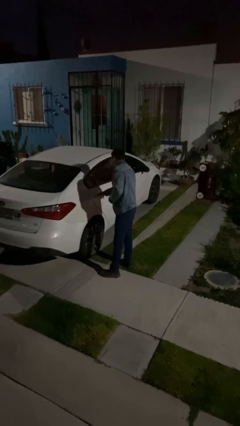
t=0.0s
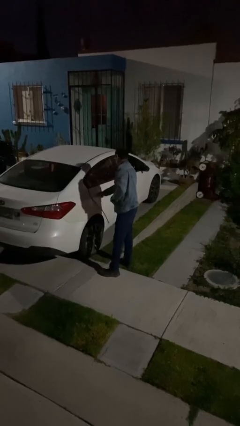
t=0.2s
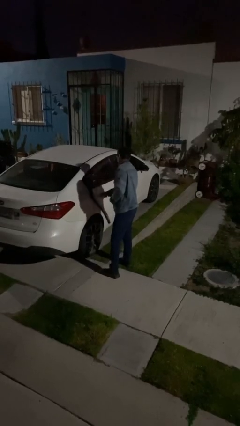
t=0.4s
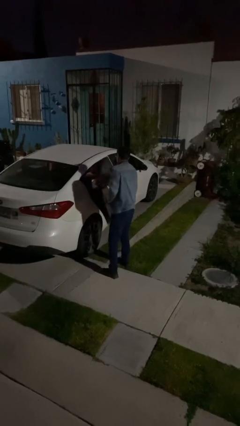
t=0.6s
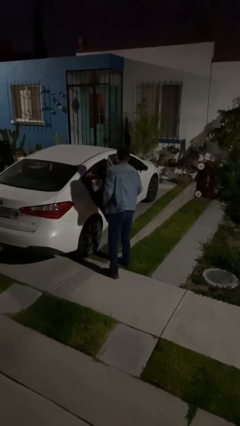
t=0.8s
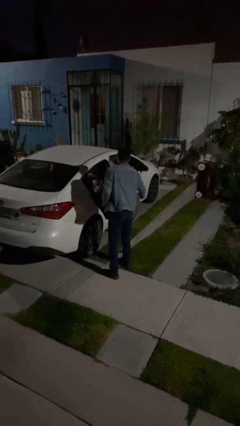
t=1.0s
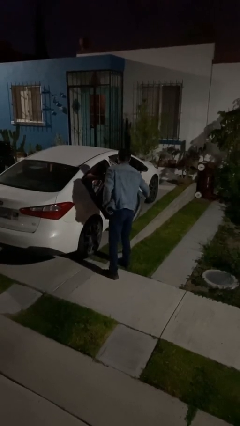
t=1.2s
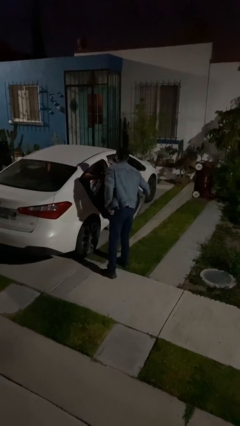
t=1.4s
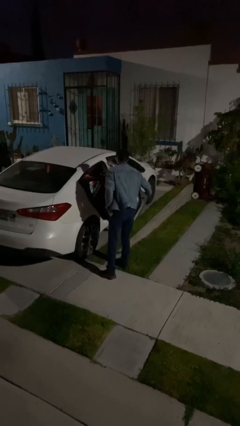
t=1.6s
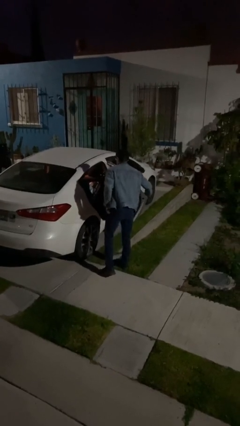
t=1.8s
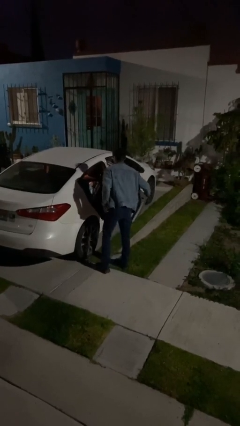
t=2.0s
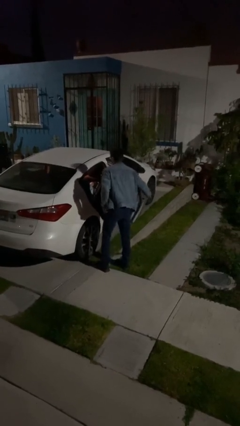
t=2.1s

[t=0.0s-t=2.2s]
person opens car door

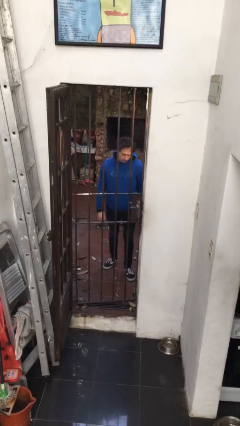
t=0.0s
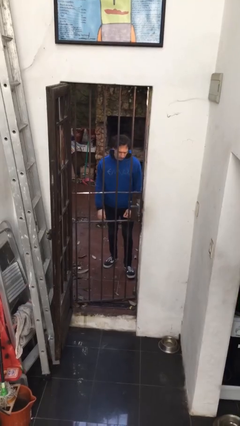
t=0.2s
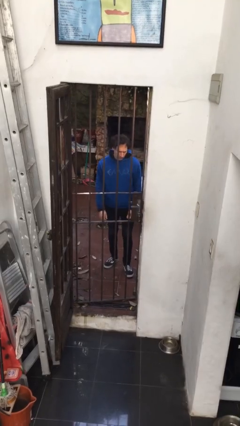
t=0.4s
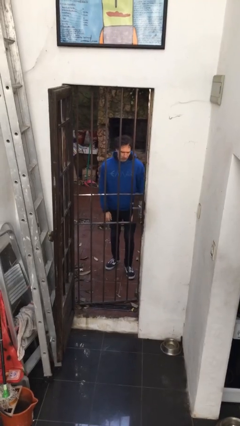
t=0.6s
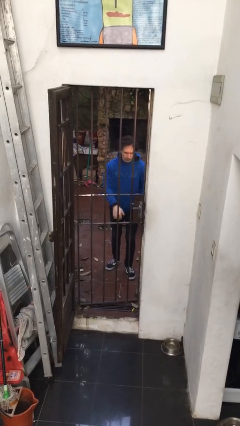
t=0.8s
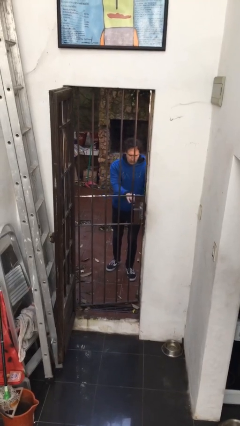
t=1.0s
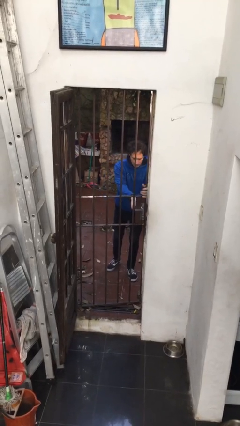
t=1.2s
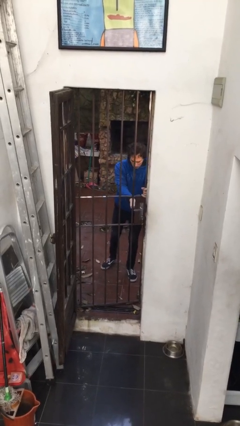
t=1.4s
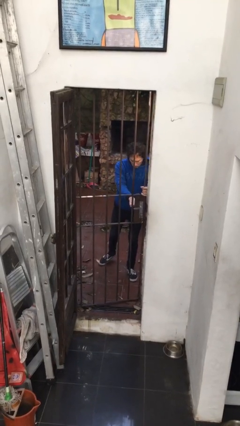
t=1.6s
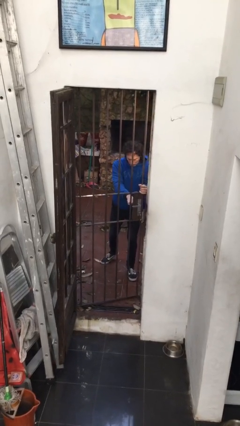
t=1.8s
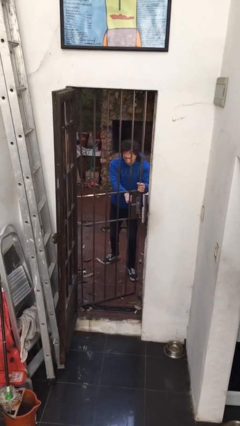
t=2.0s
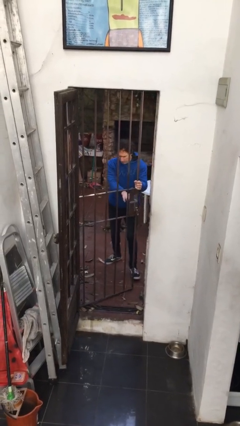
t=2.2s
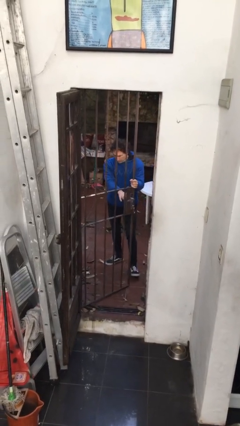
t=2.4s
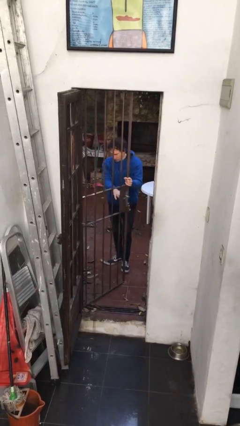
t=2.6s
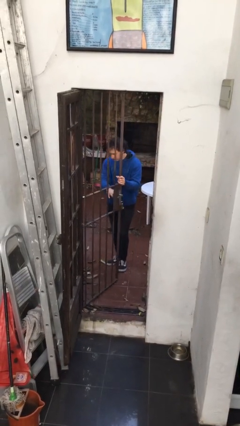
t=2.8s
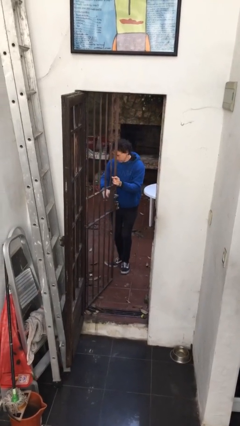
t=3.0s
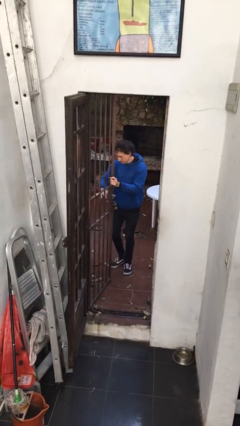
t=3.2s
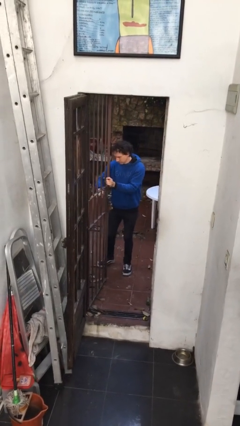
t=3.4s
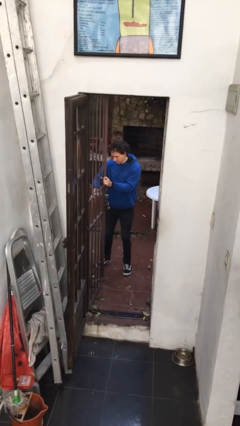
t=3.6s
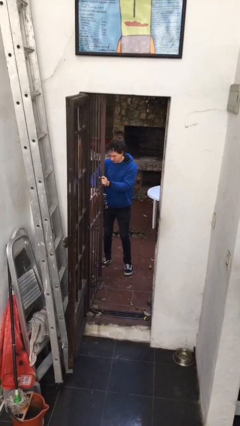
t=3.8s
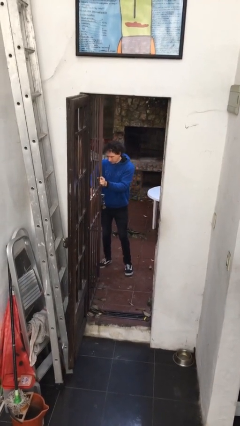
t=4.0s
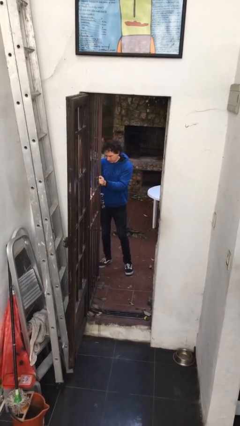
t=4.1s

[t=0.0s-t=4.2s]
person opens gate

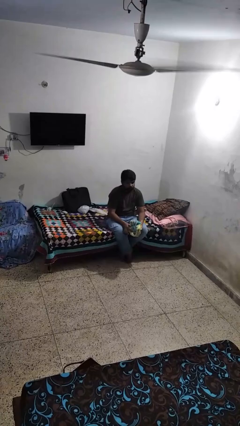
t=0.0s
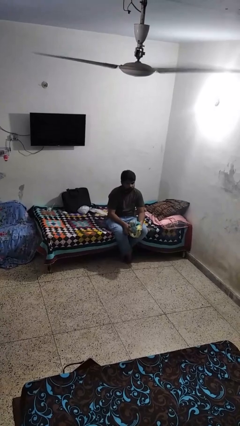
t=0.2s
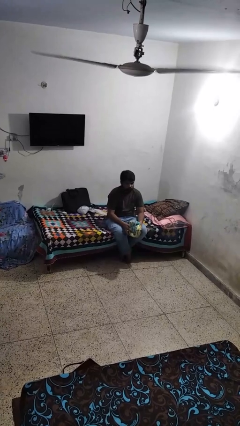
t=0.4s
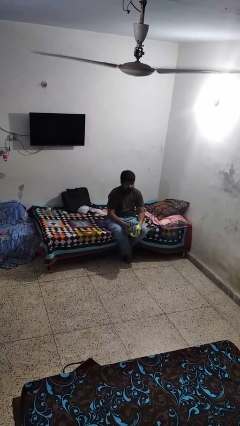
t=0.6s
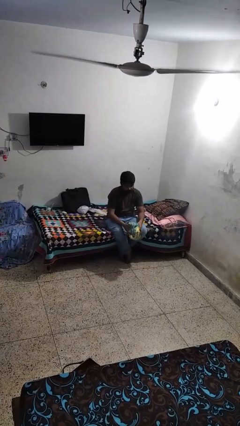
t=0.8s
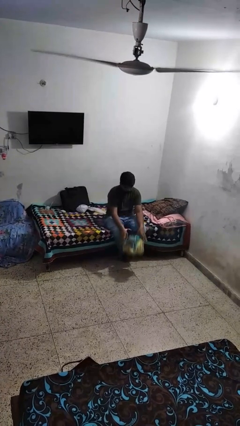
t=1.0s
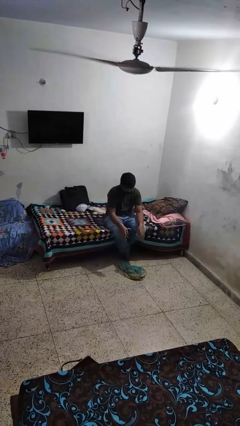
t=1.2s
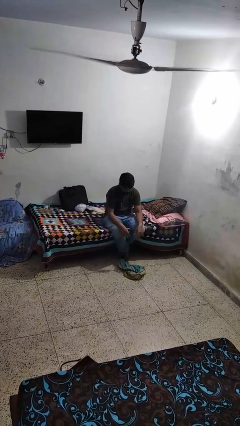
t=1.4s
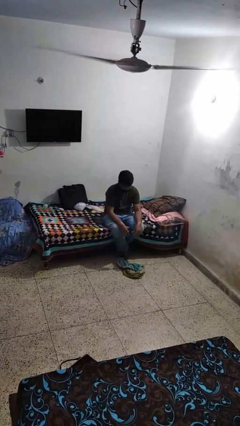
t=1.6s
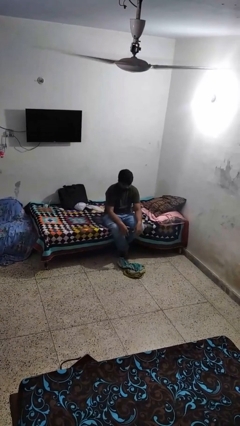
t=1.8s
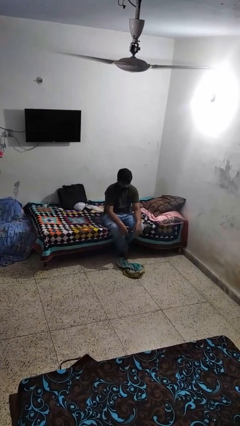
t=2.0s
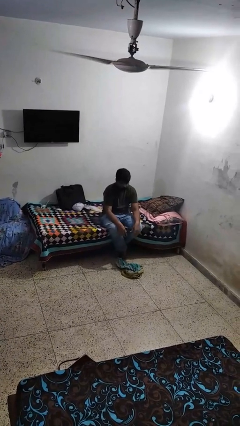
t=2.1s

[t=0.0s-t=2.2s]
person drops object

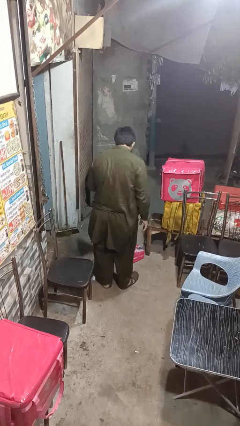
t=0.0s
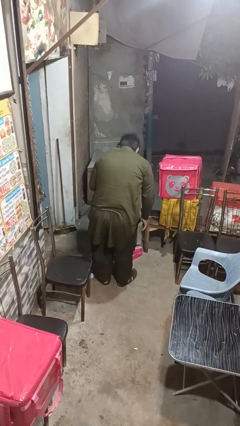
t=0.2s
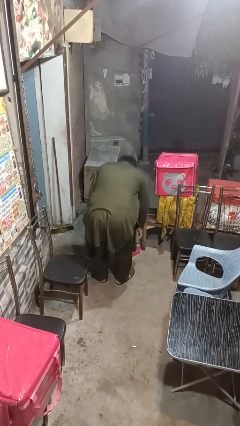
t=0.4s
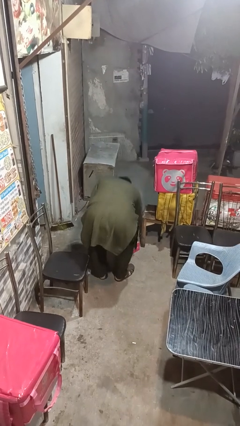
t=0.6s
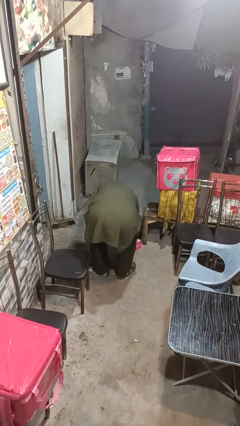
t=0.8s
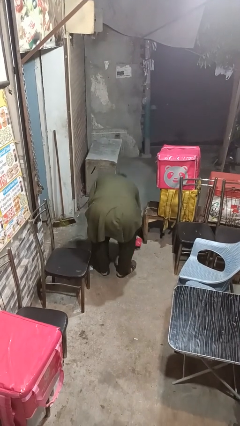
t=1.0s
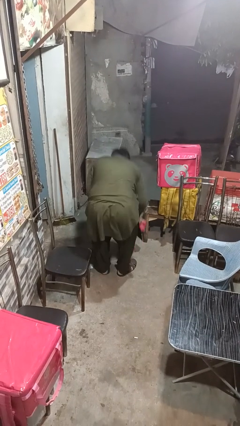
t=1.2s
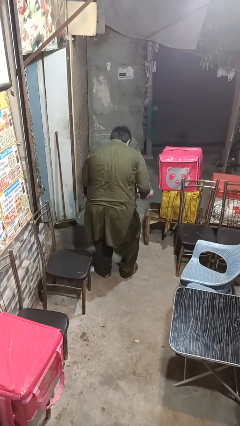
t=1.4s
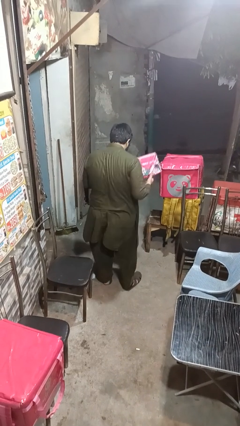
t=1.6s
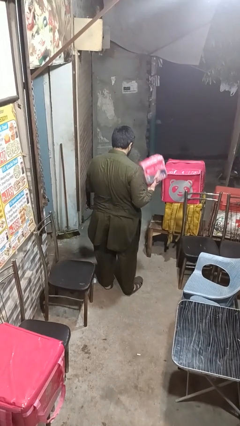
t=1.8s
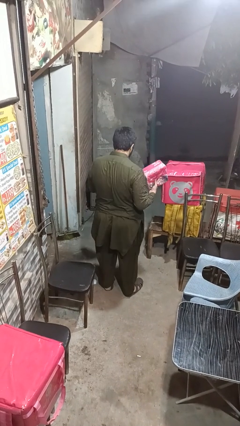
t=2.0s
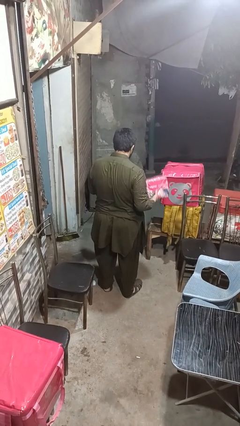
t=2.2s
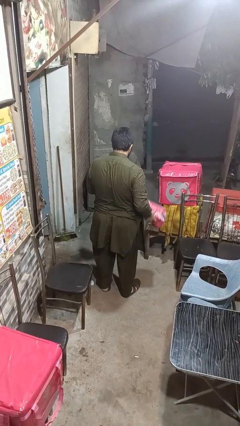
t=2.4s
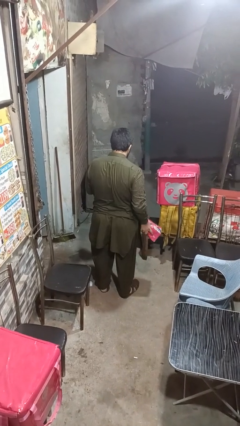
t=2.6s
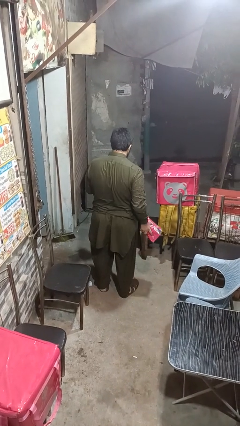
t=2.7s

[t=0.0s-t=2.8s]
person picks up object from floor

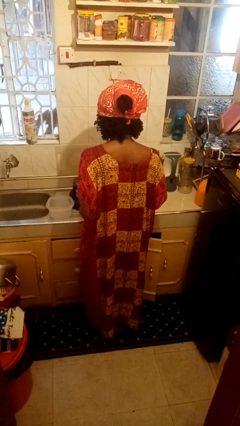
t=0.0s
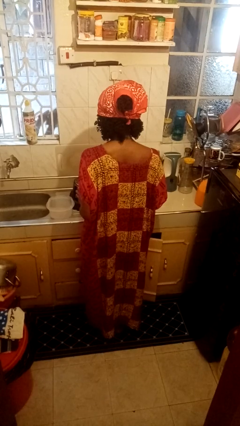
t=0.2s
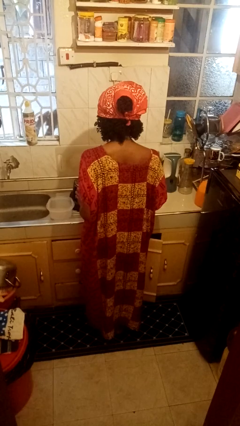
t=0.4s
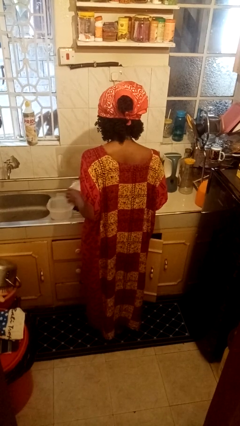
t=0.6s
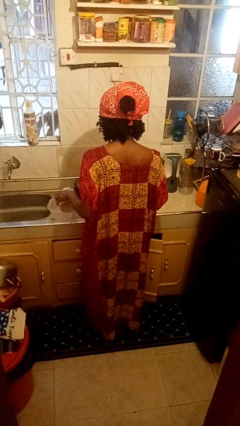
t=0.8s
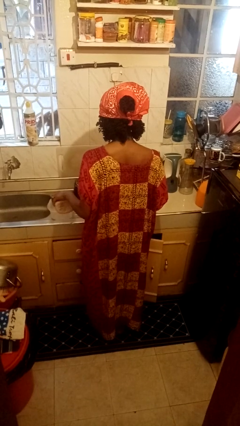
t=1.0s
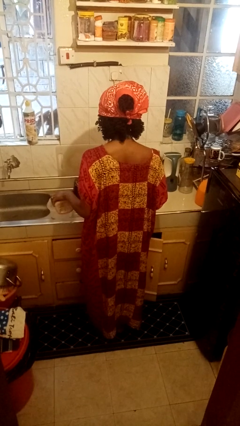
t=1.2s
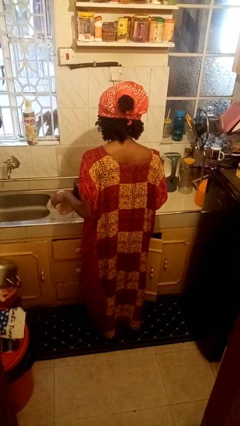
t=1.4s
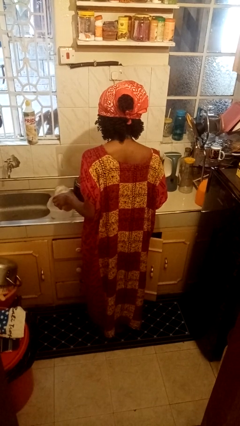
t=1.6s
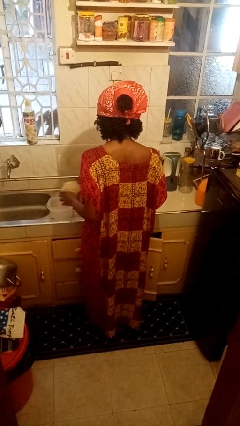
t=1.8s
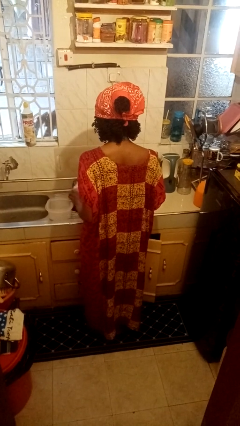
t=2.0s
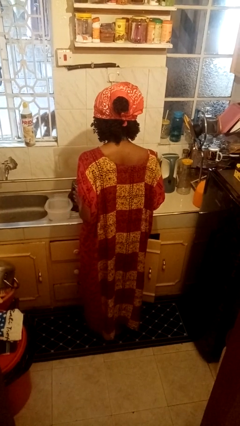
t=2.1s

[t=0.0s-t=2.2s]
person pours into bowl

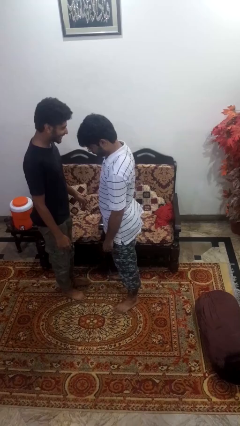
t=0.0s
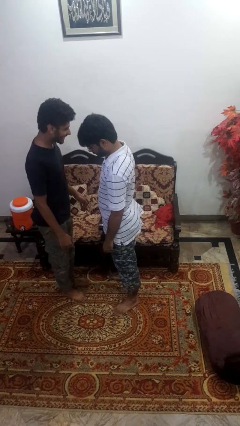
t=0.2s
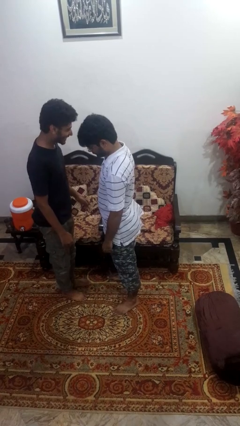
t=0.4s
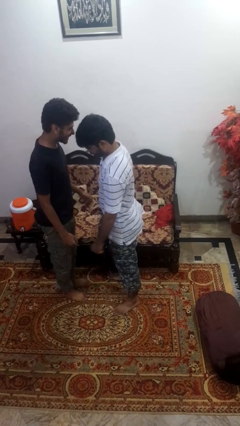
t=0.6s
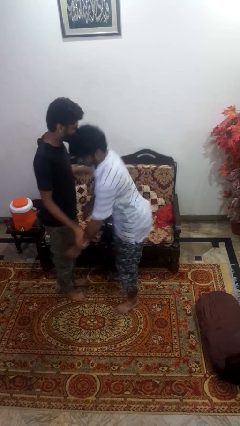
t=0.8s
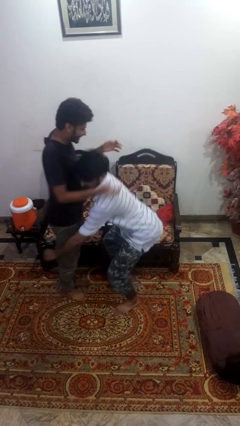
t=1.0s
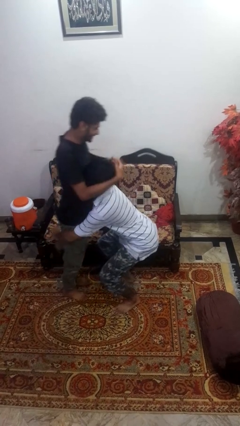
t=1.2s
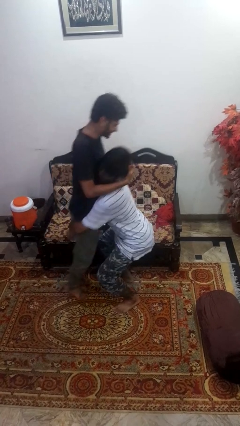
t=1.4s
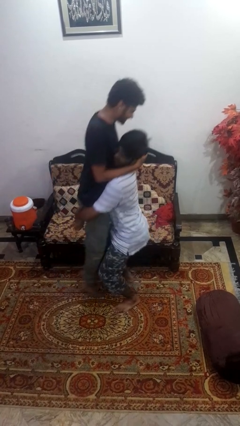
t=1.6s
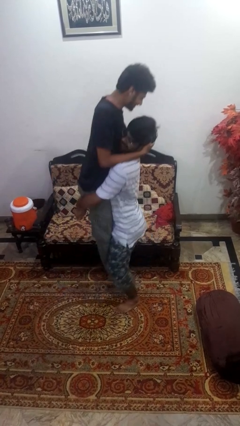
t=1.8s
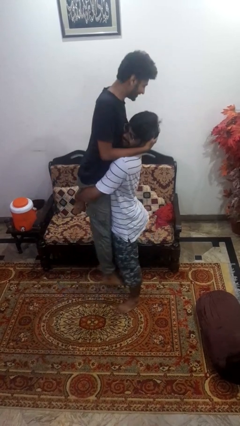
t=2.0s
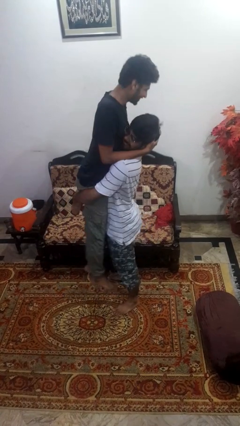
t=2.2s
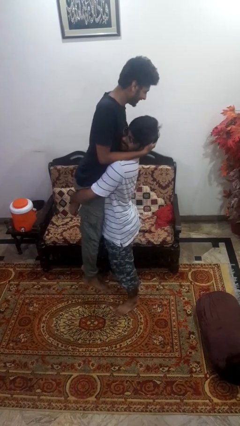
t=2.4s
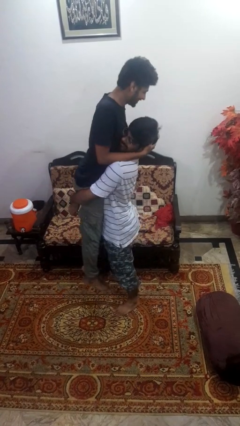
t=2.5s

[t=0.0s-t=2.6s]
person picks up person

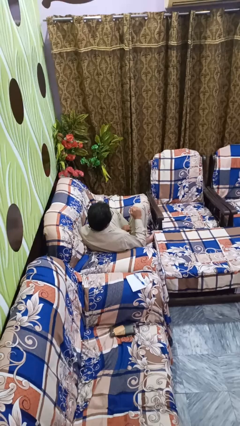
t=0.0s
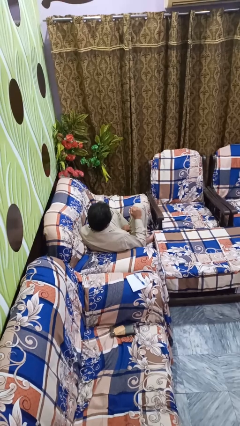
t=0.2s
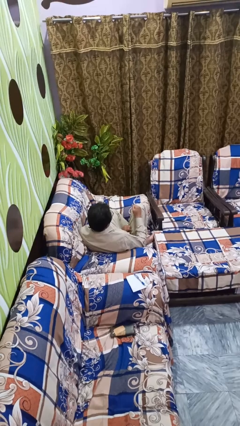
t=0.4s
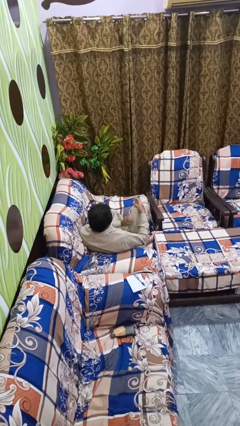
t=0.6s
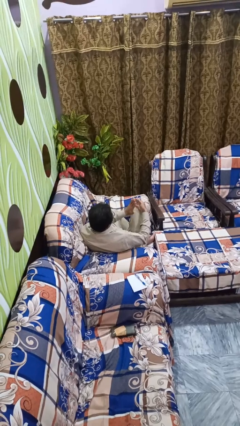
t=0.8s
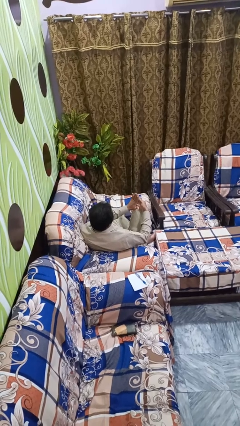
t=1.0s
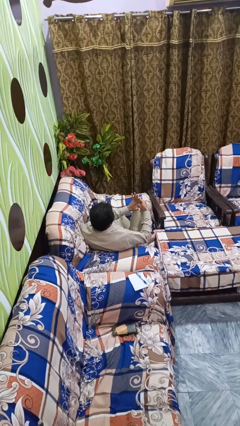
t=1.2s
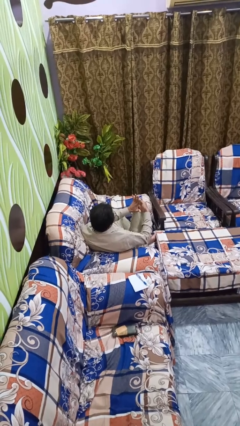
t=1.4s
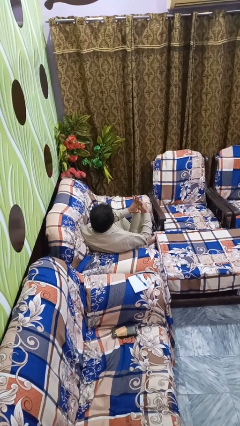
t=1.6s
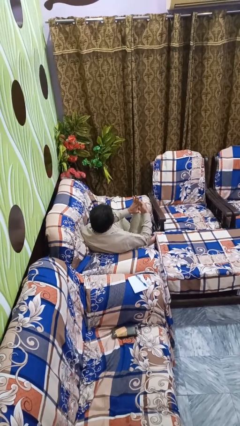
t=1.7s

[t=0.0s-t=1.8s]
person gestures number five
